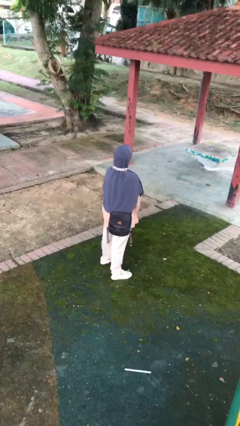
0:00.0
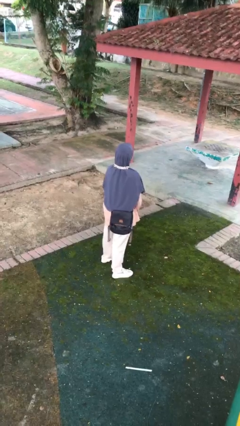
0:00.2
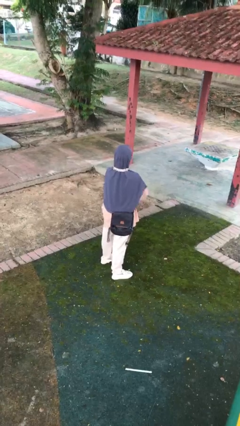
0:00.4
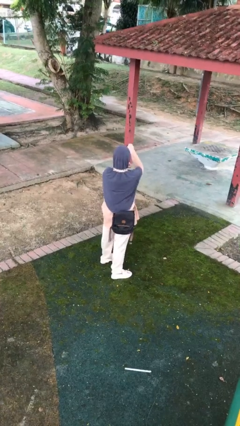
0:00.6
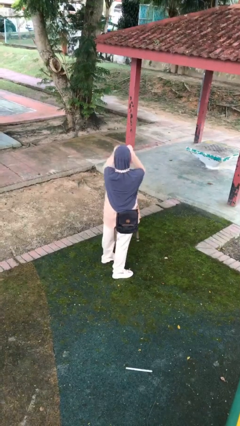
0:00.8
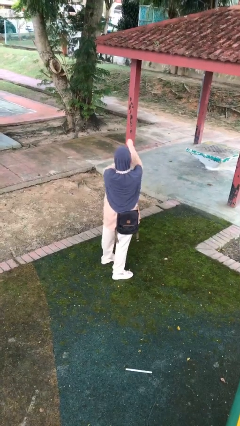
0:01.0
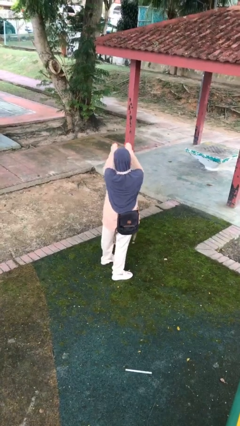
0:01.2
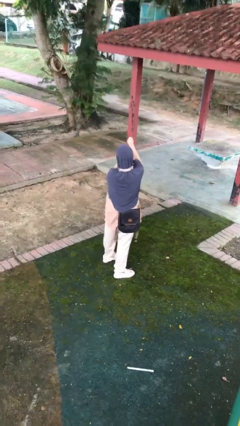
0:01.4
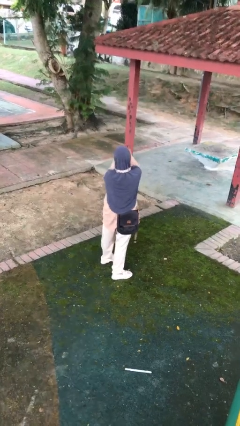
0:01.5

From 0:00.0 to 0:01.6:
person punches

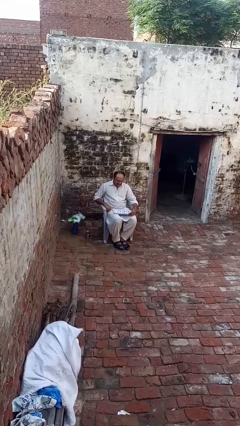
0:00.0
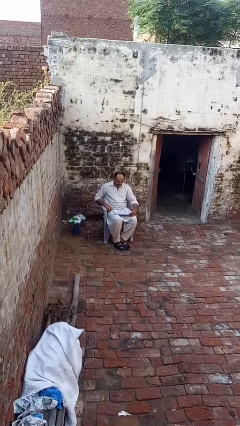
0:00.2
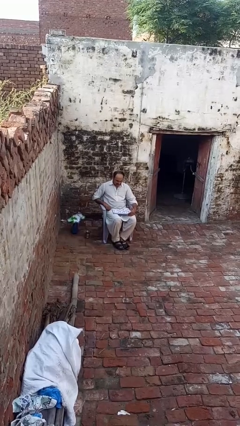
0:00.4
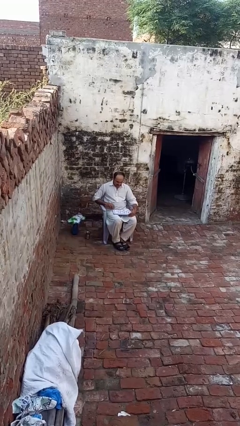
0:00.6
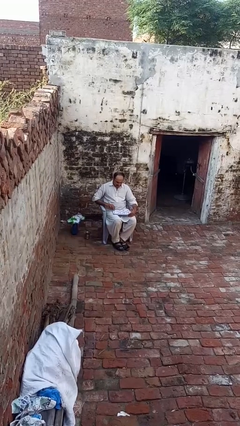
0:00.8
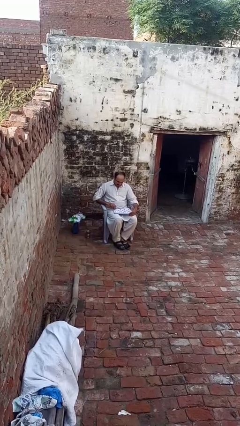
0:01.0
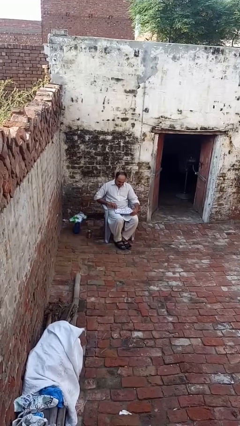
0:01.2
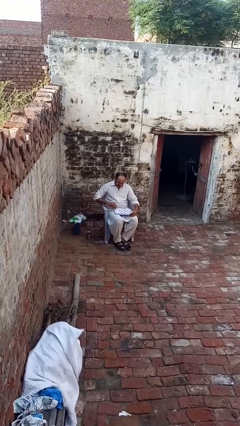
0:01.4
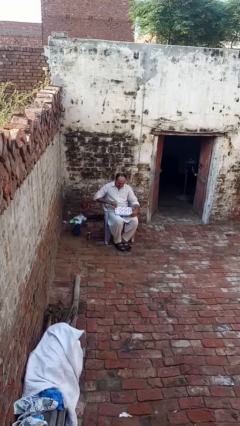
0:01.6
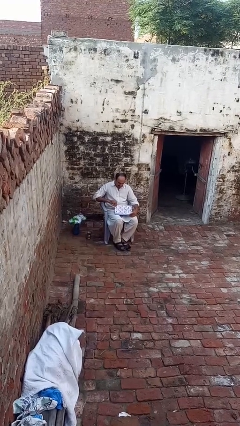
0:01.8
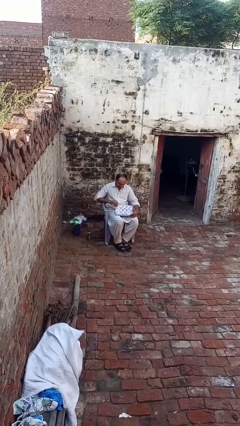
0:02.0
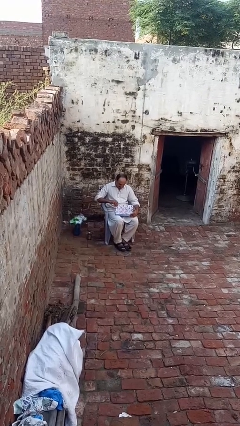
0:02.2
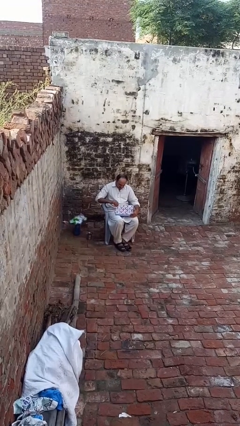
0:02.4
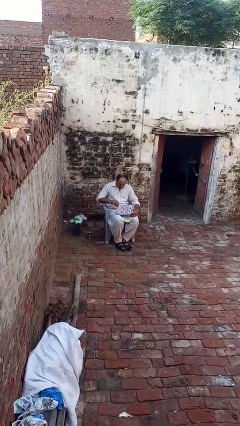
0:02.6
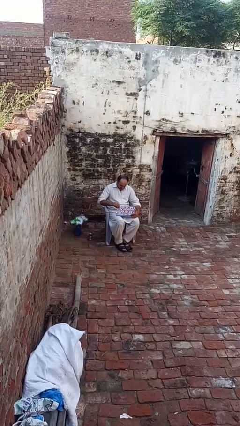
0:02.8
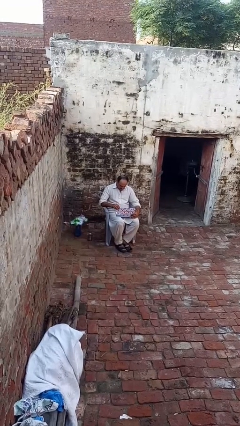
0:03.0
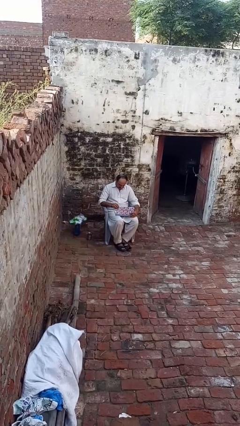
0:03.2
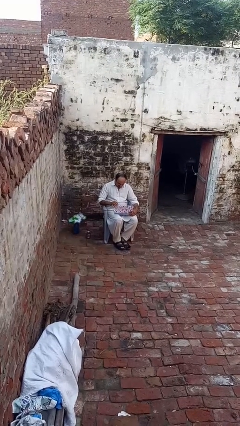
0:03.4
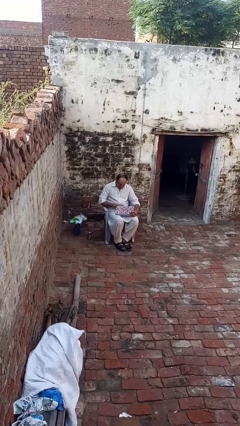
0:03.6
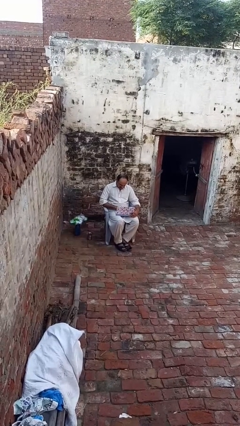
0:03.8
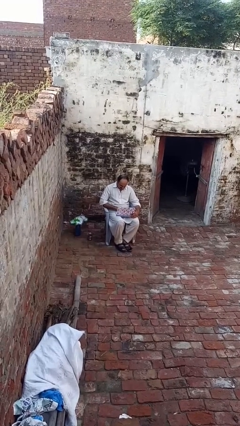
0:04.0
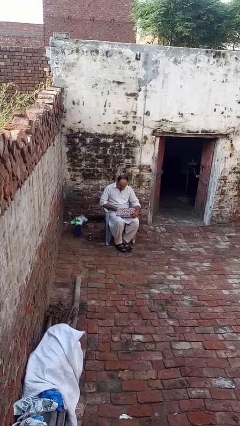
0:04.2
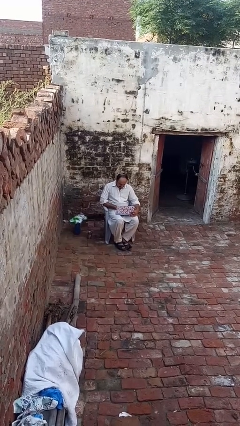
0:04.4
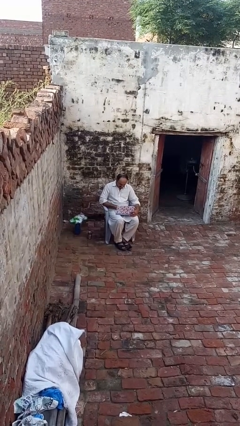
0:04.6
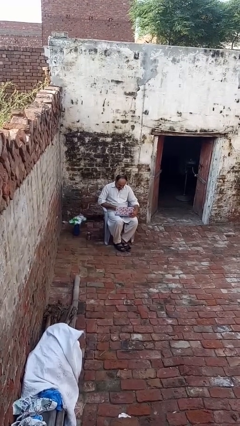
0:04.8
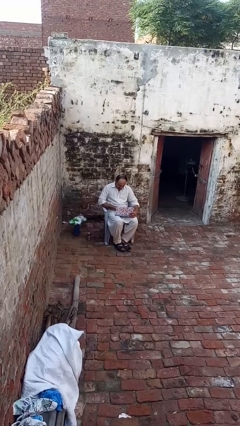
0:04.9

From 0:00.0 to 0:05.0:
person opens laptop

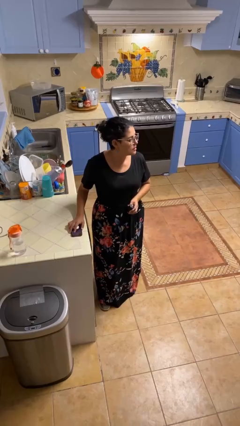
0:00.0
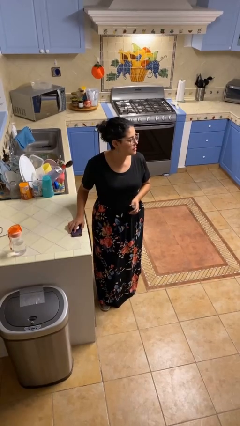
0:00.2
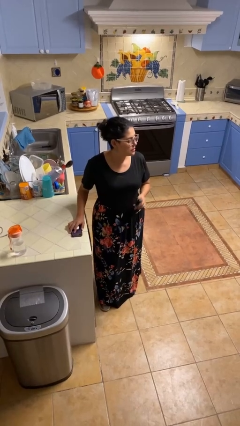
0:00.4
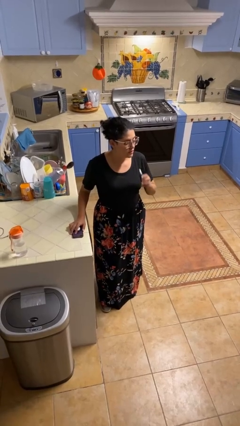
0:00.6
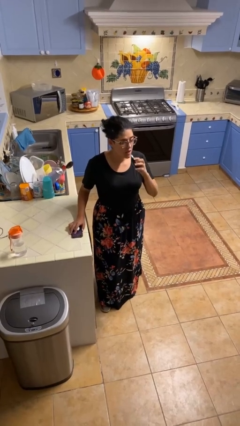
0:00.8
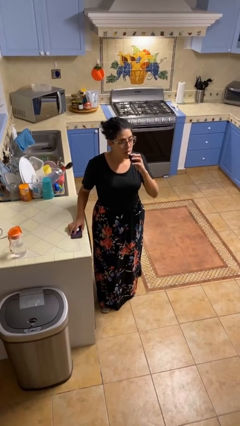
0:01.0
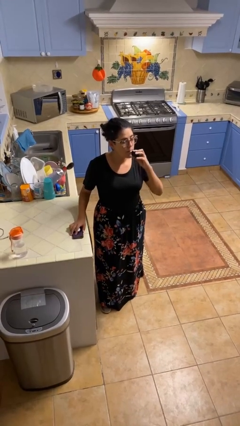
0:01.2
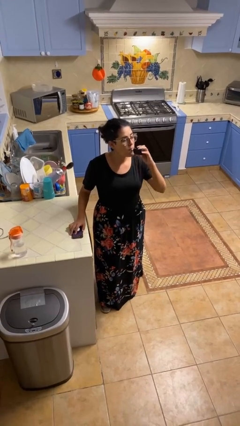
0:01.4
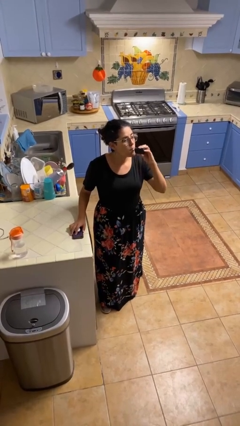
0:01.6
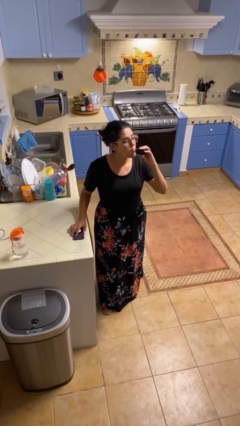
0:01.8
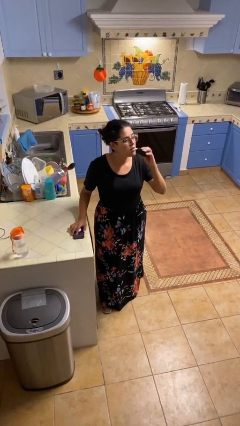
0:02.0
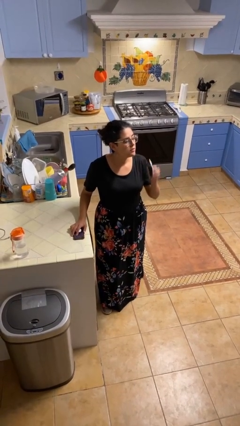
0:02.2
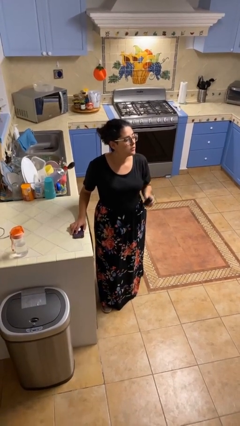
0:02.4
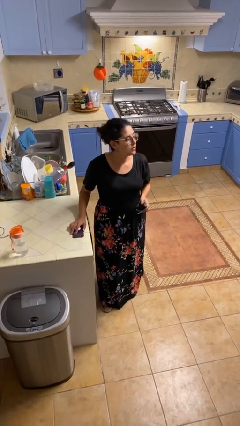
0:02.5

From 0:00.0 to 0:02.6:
person vapes

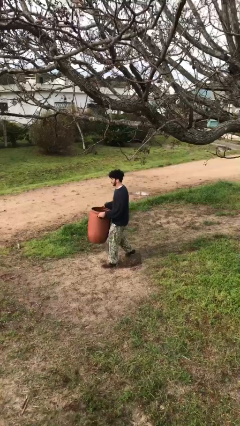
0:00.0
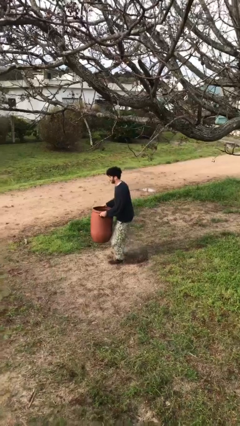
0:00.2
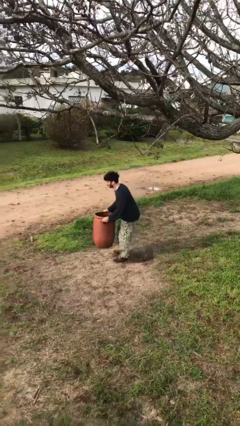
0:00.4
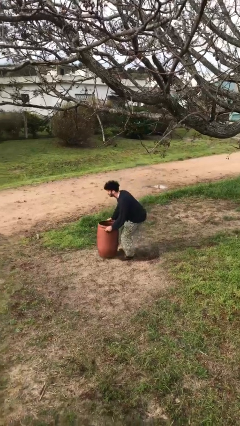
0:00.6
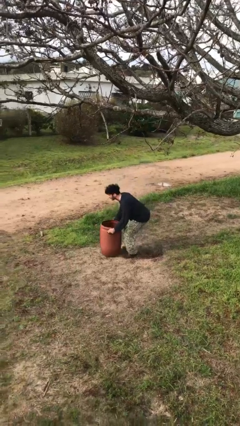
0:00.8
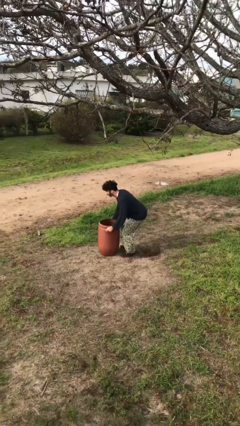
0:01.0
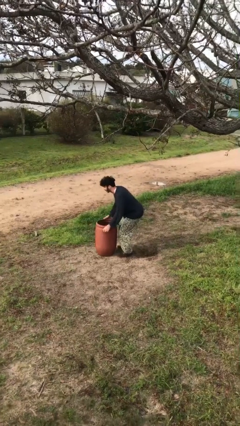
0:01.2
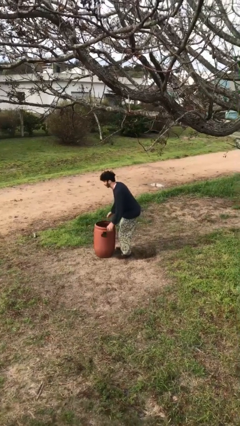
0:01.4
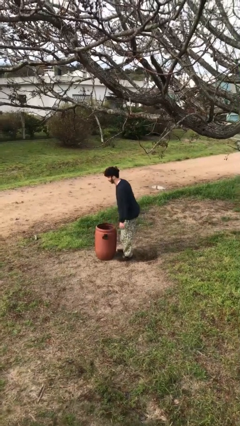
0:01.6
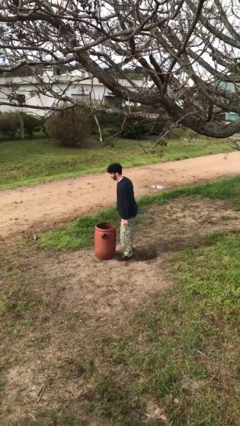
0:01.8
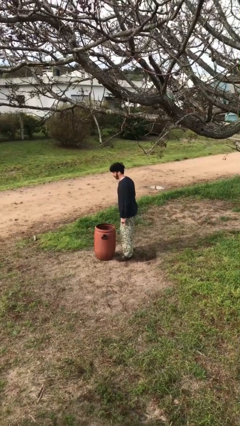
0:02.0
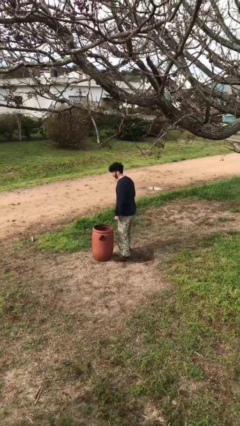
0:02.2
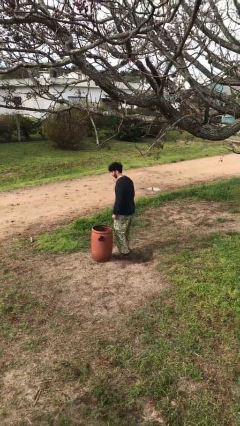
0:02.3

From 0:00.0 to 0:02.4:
person puts down object on floor

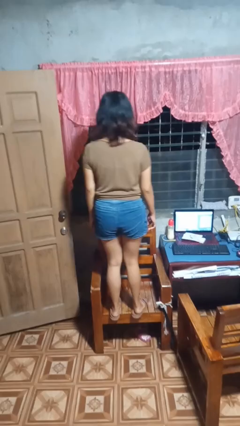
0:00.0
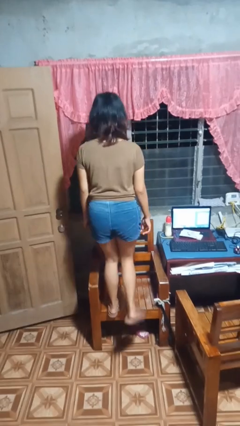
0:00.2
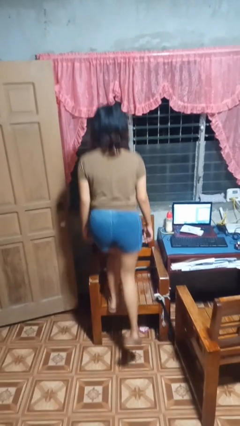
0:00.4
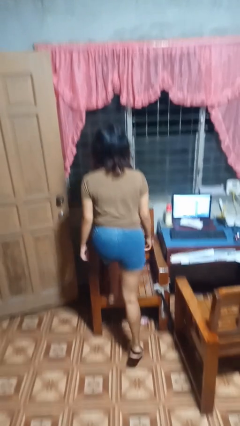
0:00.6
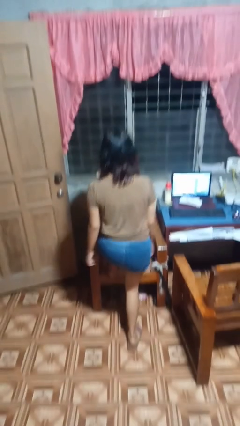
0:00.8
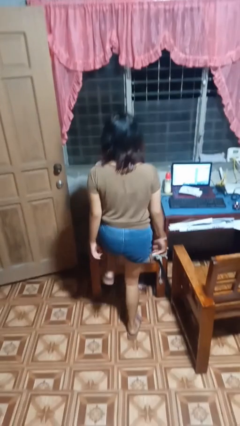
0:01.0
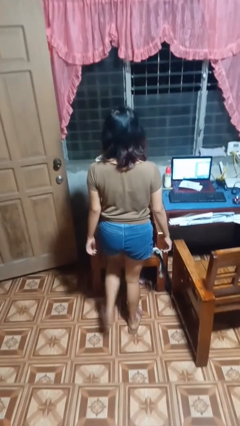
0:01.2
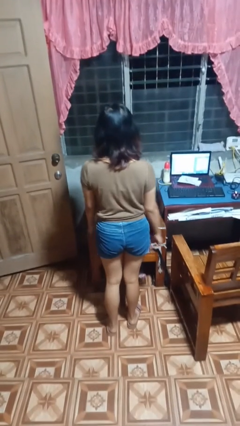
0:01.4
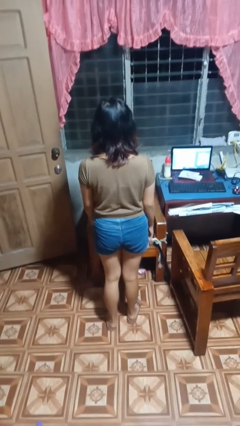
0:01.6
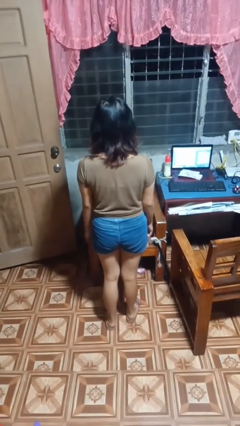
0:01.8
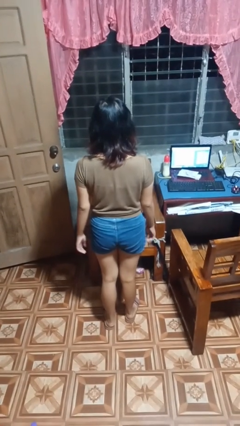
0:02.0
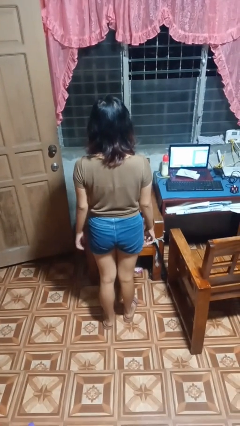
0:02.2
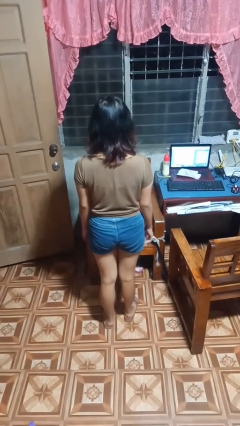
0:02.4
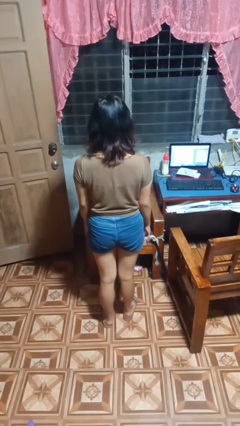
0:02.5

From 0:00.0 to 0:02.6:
person climbs off chair

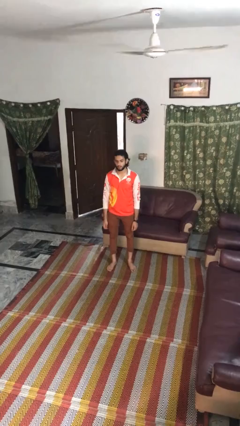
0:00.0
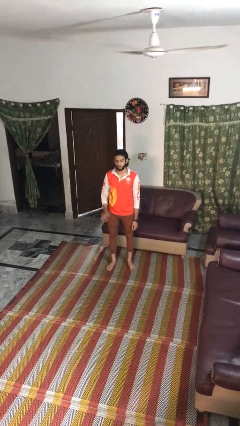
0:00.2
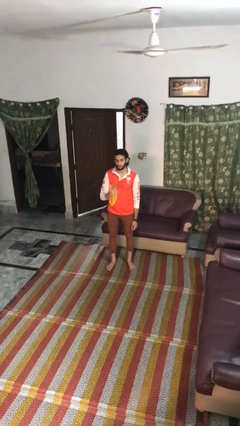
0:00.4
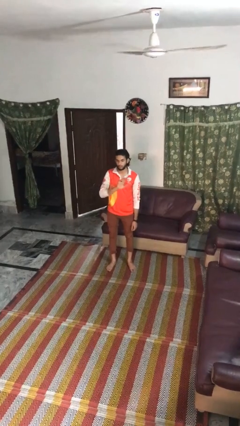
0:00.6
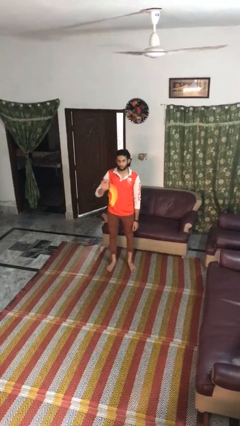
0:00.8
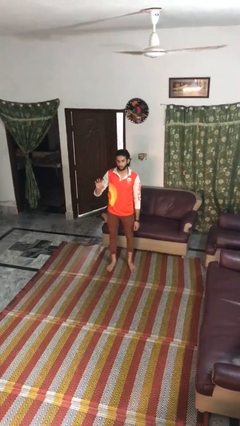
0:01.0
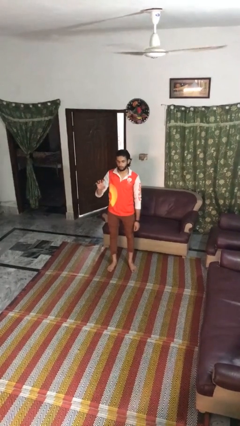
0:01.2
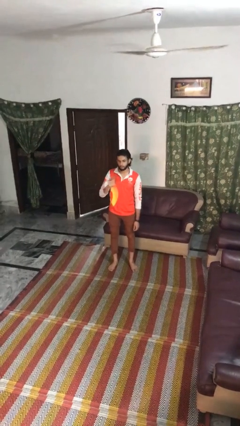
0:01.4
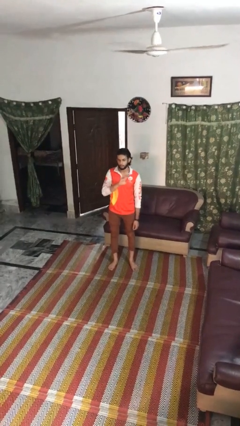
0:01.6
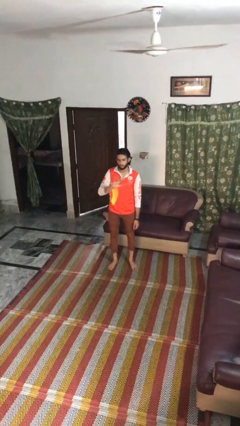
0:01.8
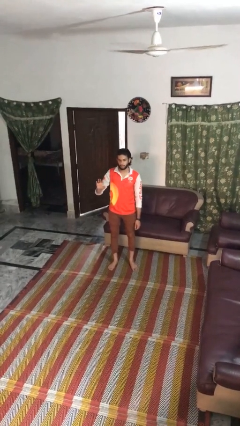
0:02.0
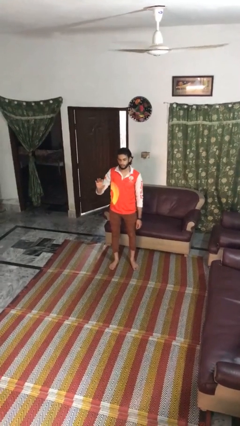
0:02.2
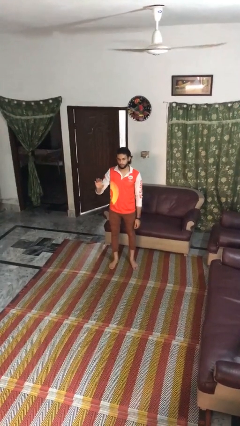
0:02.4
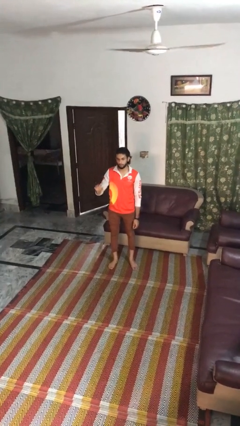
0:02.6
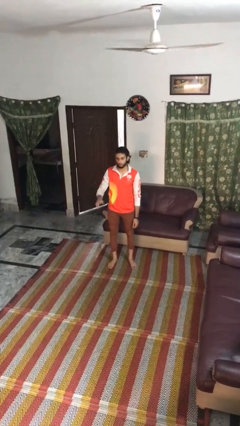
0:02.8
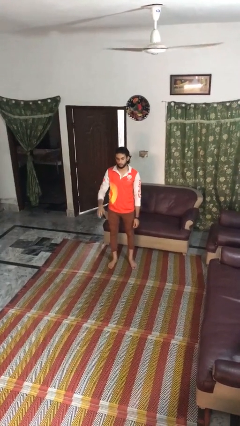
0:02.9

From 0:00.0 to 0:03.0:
person gestures swipe right
